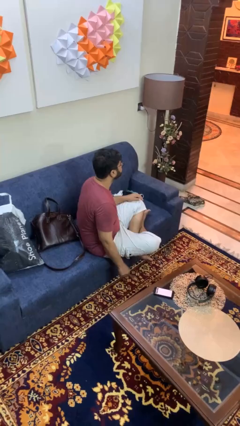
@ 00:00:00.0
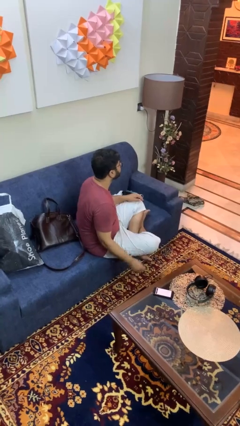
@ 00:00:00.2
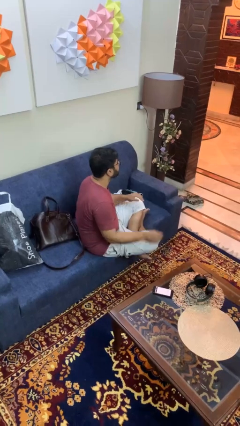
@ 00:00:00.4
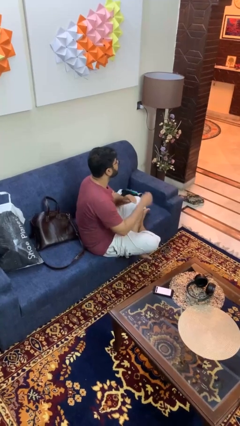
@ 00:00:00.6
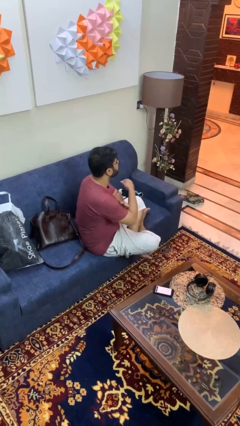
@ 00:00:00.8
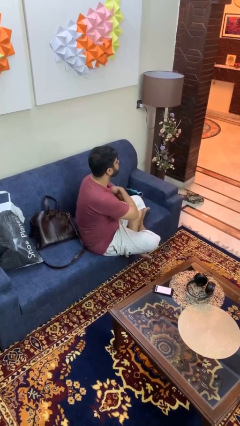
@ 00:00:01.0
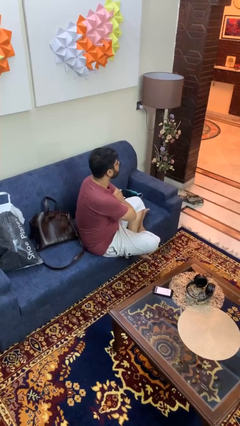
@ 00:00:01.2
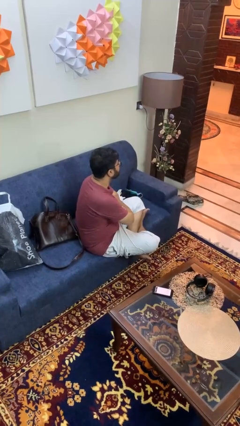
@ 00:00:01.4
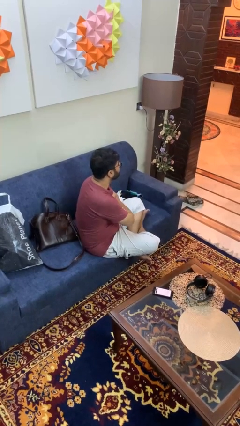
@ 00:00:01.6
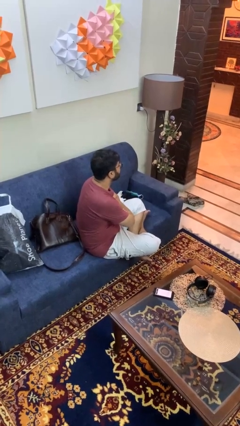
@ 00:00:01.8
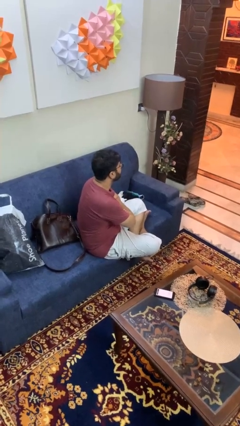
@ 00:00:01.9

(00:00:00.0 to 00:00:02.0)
person crosses arms

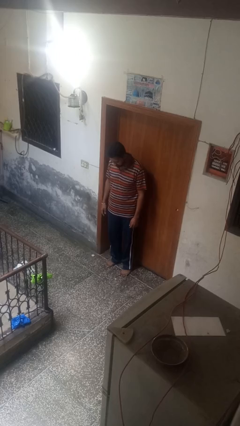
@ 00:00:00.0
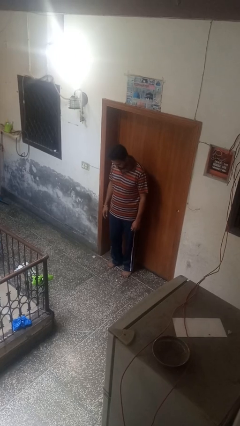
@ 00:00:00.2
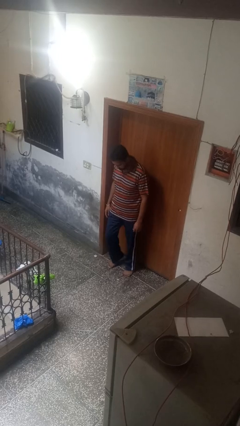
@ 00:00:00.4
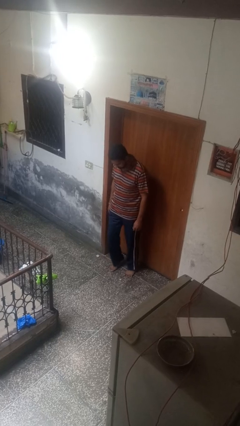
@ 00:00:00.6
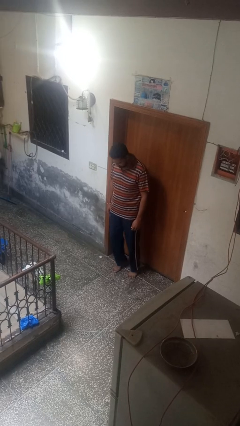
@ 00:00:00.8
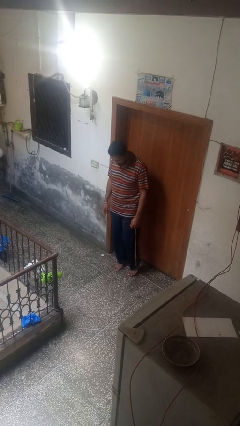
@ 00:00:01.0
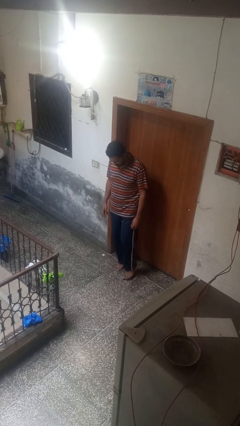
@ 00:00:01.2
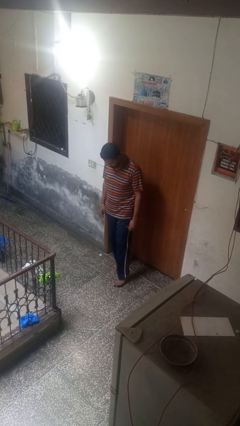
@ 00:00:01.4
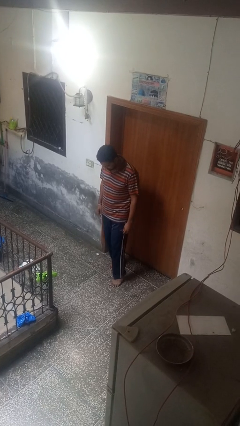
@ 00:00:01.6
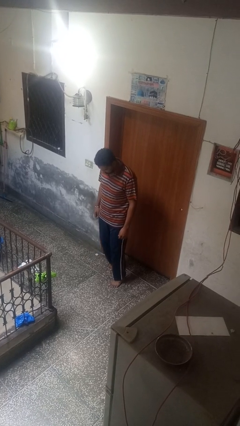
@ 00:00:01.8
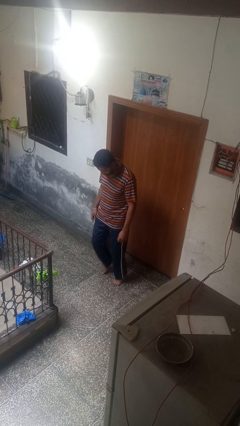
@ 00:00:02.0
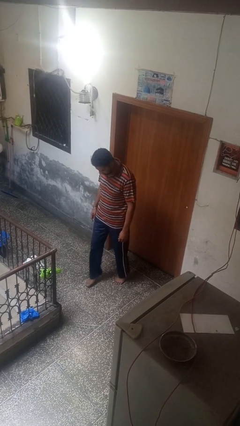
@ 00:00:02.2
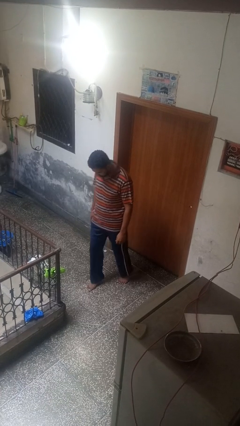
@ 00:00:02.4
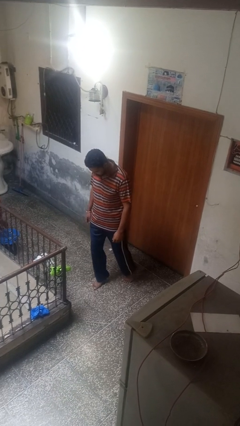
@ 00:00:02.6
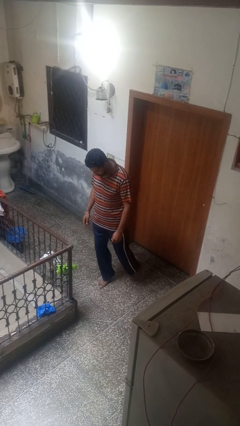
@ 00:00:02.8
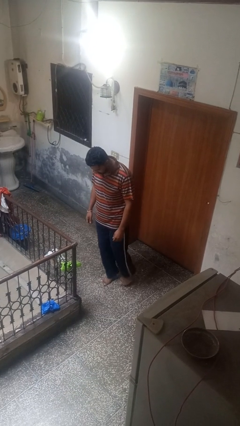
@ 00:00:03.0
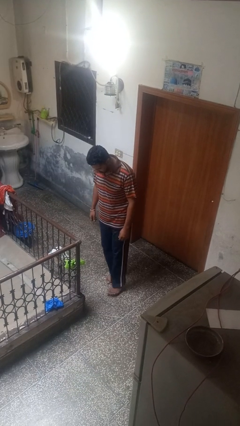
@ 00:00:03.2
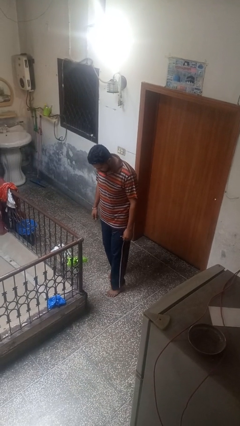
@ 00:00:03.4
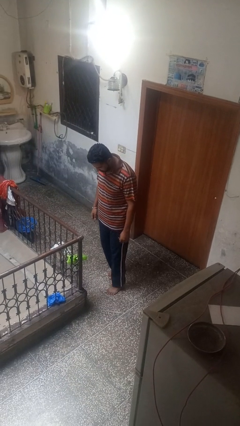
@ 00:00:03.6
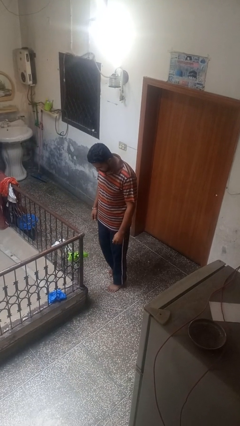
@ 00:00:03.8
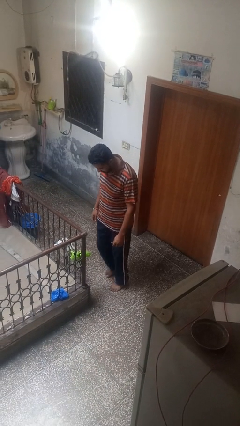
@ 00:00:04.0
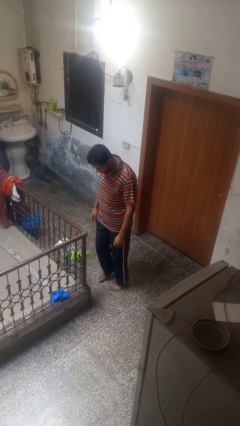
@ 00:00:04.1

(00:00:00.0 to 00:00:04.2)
person walks tiptoe

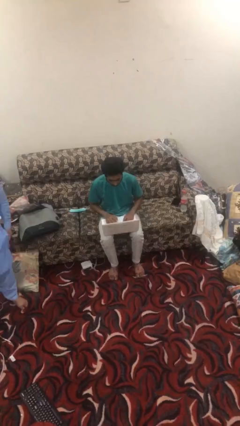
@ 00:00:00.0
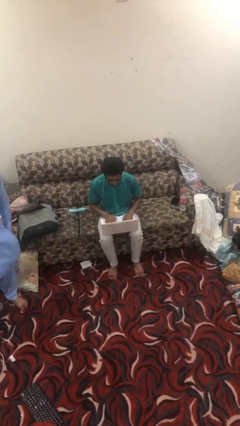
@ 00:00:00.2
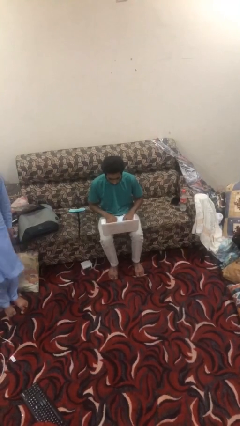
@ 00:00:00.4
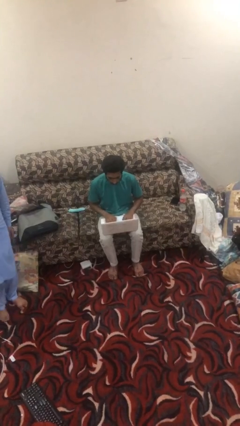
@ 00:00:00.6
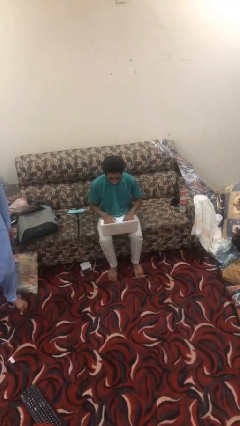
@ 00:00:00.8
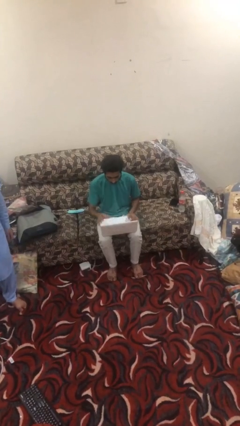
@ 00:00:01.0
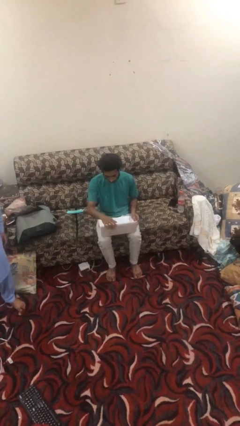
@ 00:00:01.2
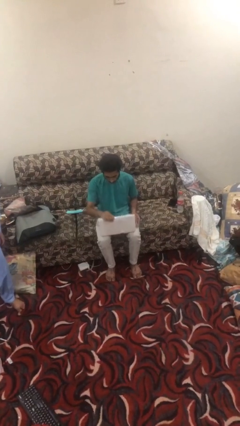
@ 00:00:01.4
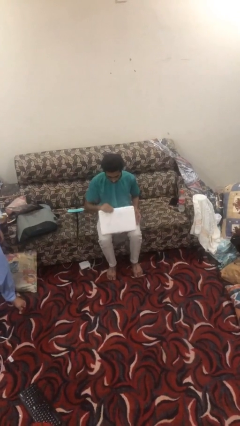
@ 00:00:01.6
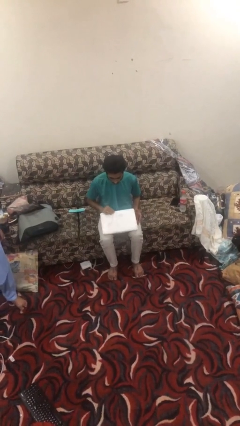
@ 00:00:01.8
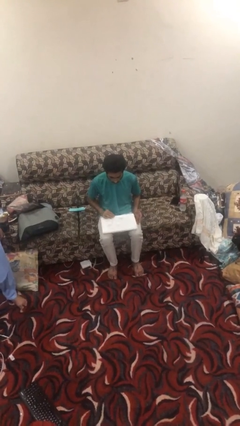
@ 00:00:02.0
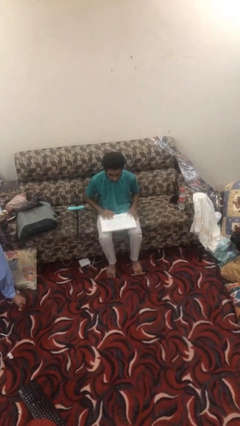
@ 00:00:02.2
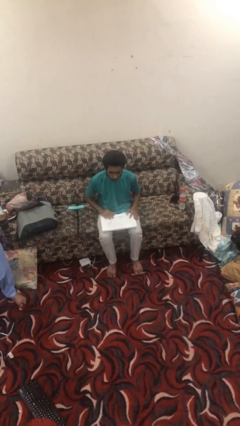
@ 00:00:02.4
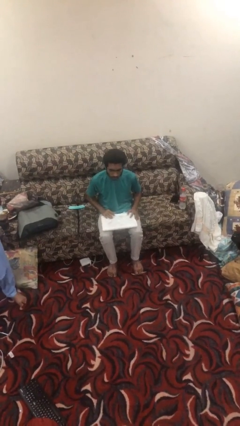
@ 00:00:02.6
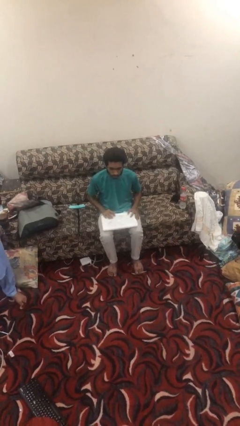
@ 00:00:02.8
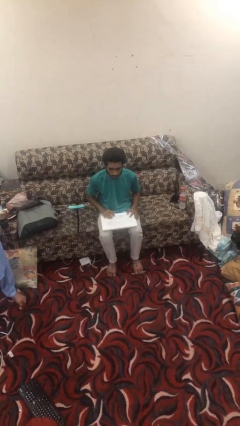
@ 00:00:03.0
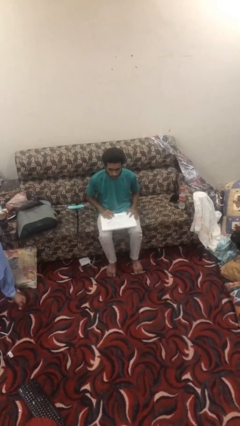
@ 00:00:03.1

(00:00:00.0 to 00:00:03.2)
person closes laptop

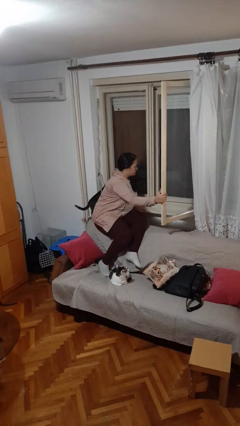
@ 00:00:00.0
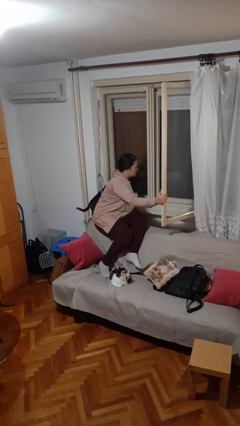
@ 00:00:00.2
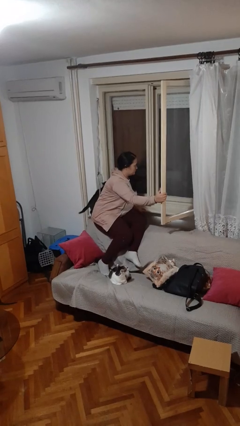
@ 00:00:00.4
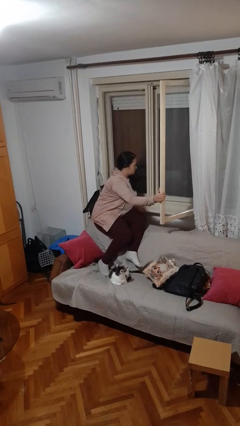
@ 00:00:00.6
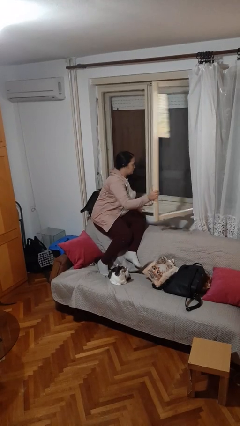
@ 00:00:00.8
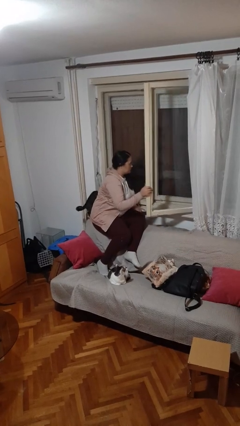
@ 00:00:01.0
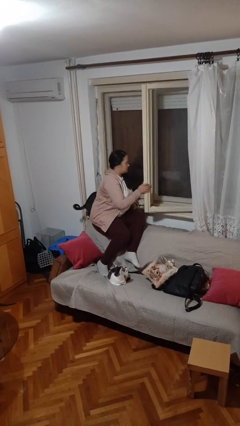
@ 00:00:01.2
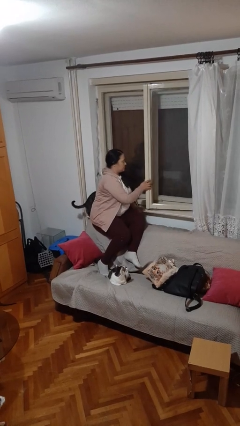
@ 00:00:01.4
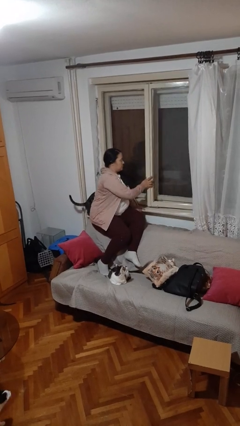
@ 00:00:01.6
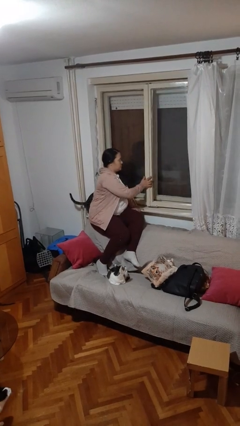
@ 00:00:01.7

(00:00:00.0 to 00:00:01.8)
person closes home window

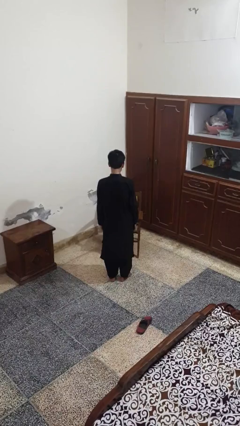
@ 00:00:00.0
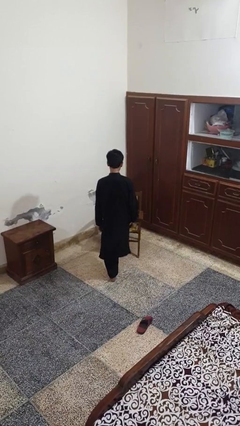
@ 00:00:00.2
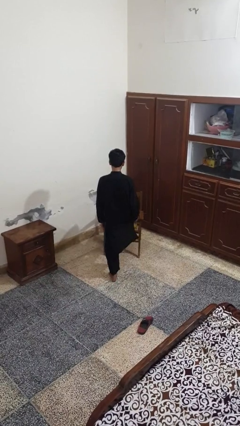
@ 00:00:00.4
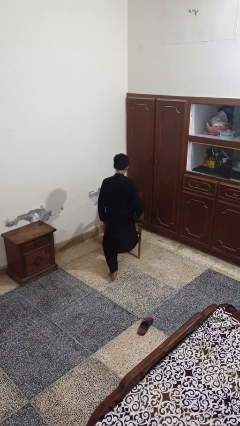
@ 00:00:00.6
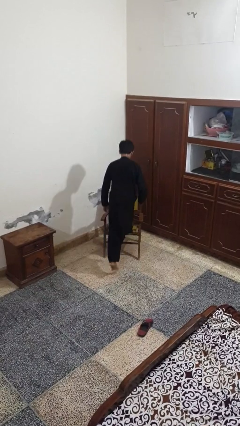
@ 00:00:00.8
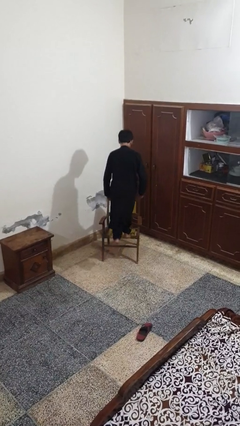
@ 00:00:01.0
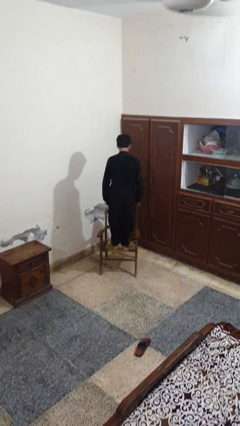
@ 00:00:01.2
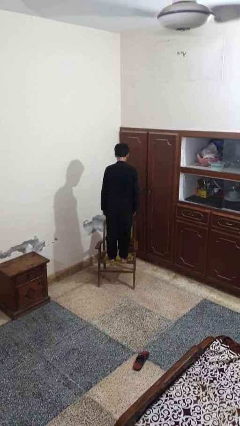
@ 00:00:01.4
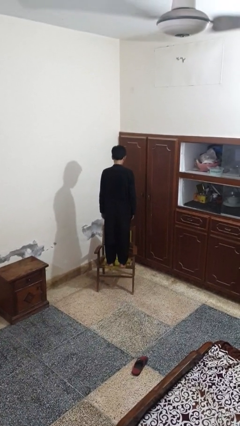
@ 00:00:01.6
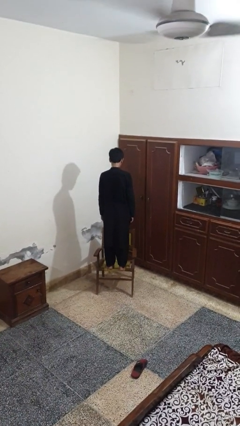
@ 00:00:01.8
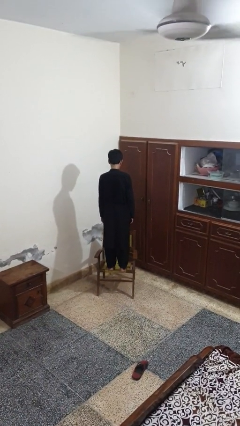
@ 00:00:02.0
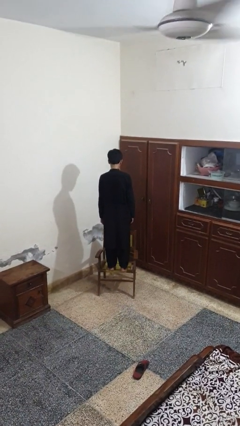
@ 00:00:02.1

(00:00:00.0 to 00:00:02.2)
person climbs on chair

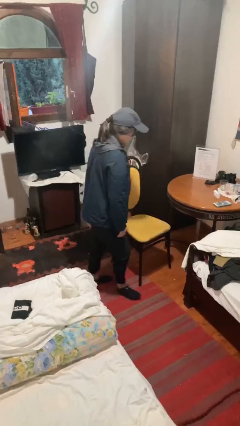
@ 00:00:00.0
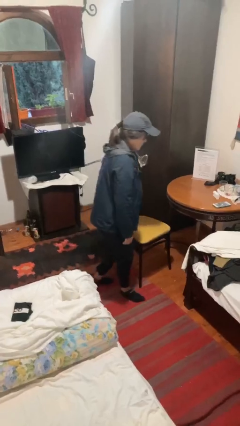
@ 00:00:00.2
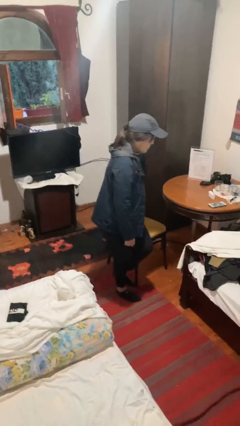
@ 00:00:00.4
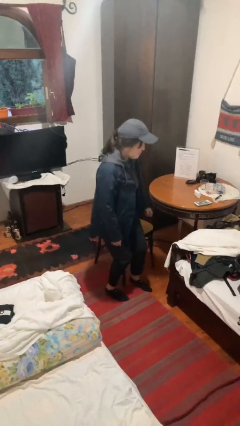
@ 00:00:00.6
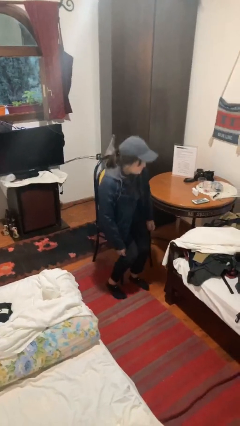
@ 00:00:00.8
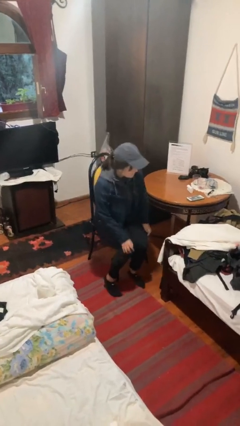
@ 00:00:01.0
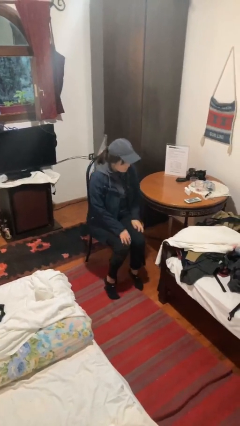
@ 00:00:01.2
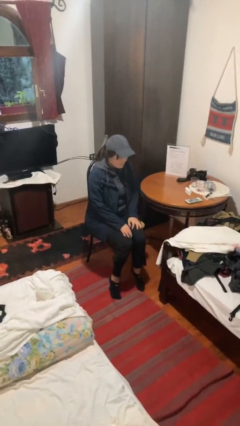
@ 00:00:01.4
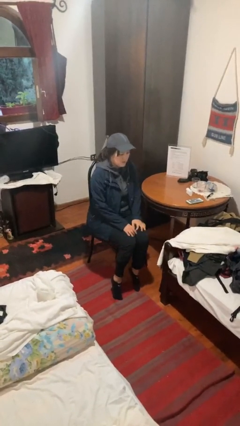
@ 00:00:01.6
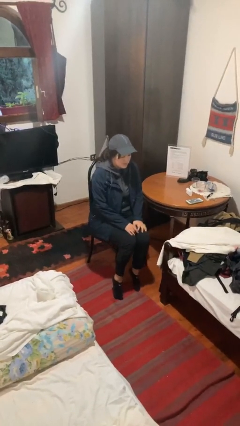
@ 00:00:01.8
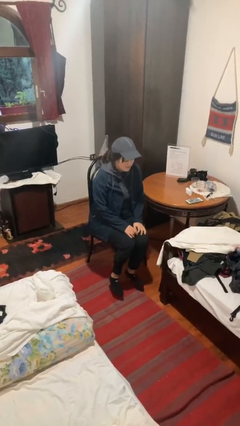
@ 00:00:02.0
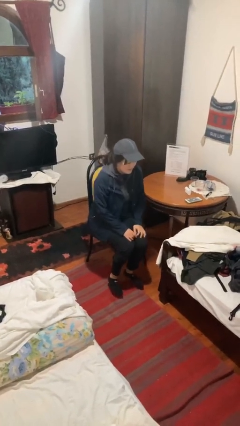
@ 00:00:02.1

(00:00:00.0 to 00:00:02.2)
person sits down

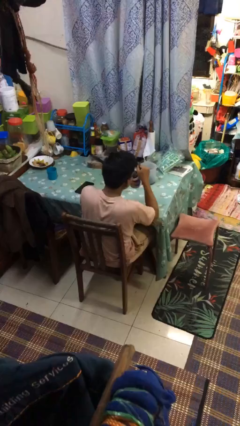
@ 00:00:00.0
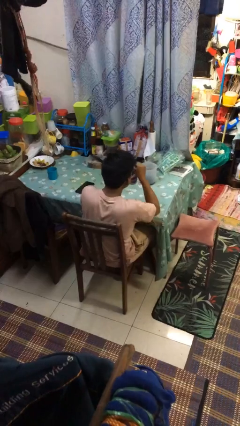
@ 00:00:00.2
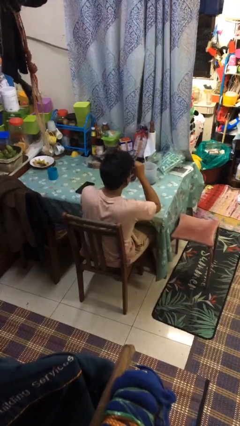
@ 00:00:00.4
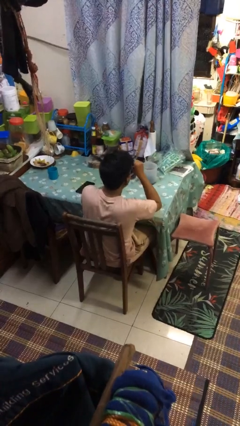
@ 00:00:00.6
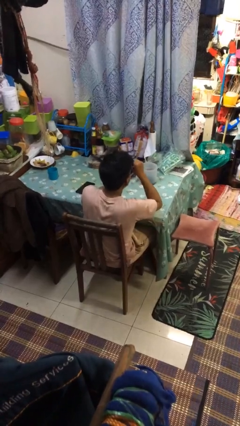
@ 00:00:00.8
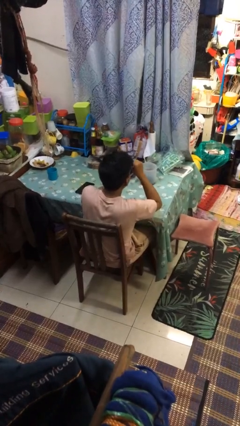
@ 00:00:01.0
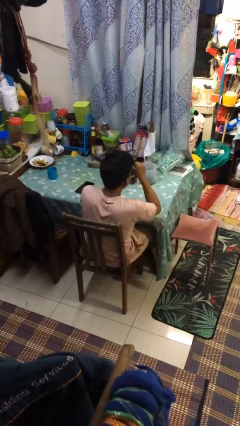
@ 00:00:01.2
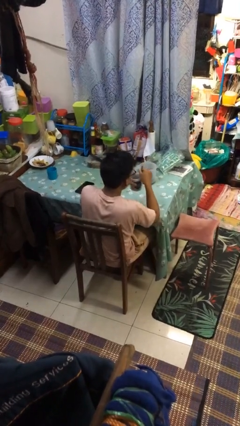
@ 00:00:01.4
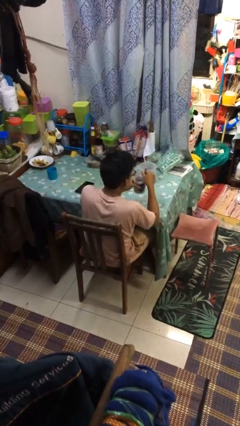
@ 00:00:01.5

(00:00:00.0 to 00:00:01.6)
person drinks from mug
